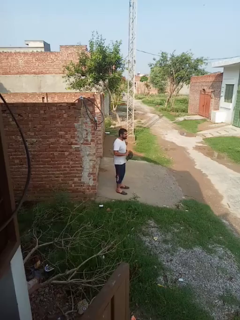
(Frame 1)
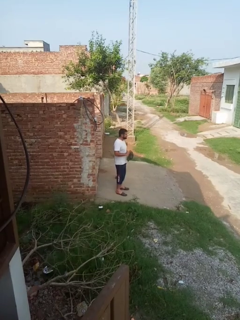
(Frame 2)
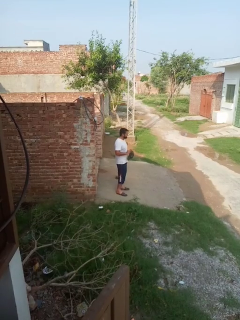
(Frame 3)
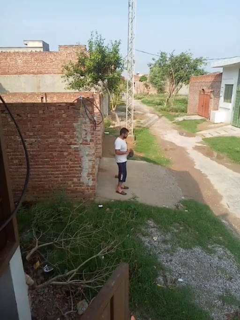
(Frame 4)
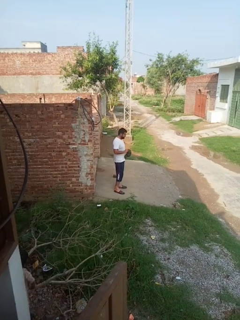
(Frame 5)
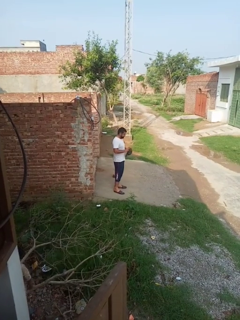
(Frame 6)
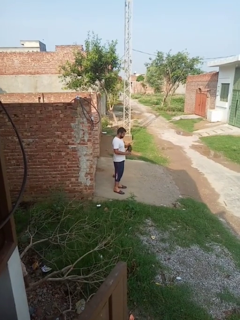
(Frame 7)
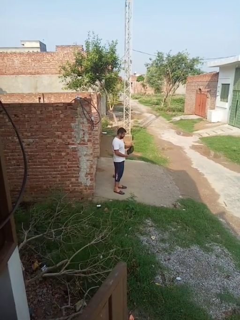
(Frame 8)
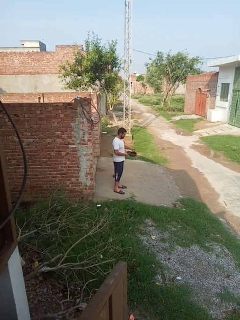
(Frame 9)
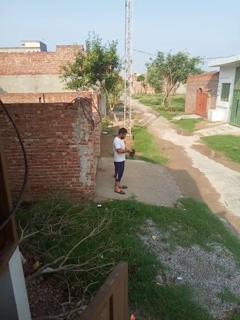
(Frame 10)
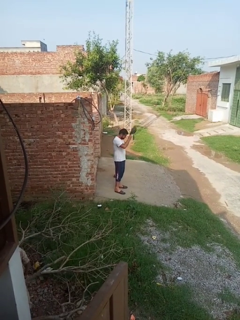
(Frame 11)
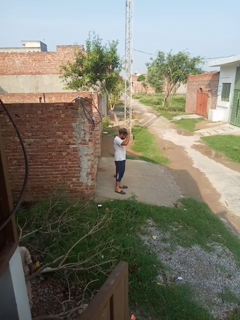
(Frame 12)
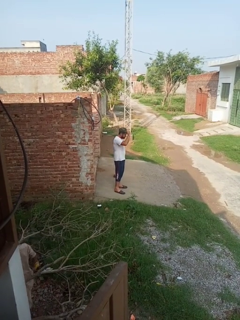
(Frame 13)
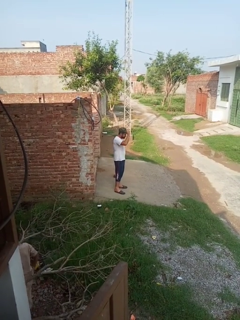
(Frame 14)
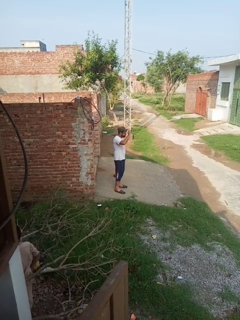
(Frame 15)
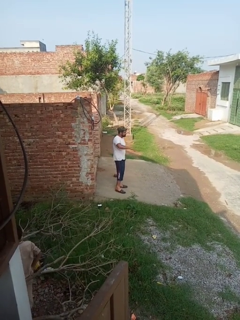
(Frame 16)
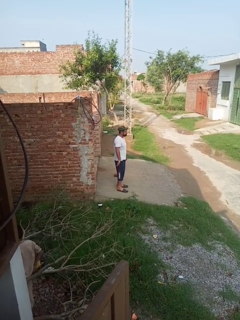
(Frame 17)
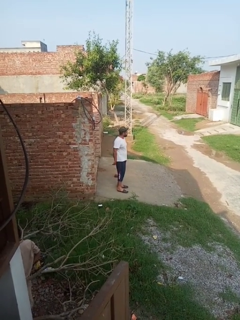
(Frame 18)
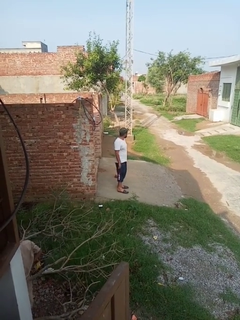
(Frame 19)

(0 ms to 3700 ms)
person puts on hat

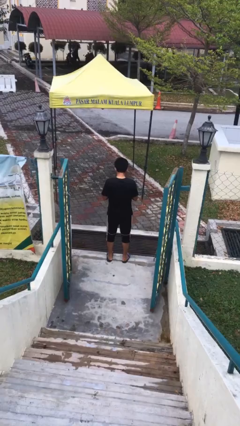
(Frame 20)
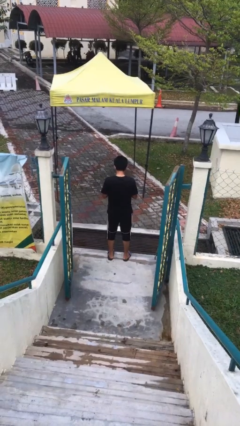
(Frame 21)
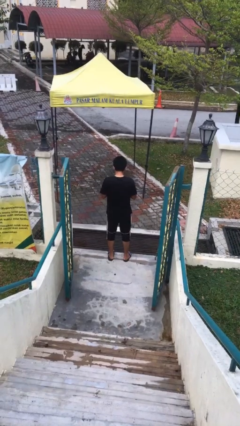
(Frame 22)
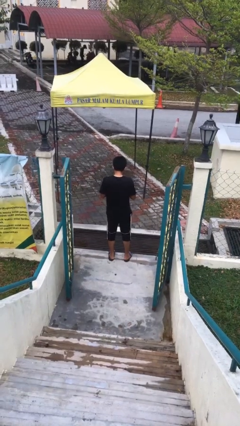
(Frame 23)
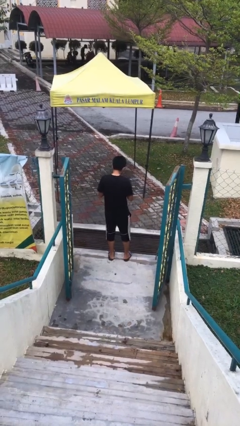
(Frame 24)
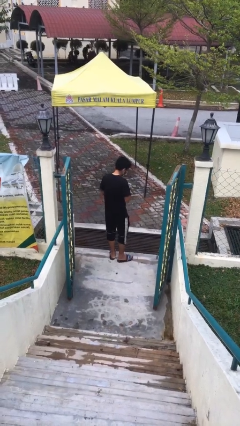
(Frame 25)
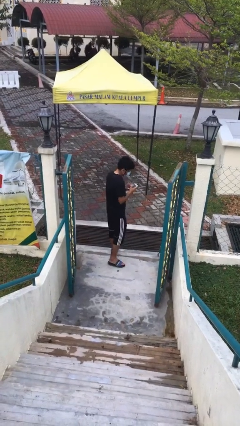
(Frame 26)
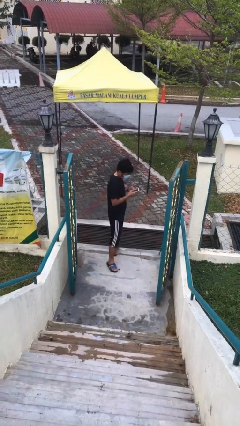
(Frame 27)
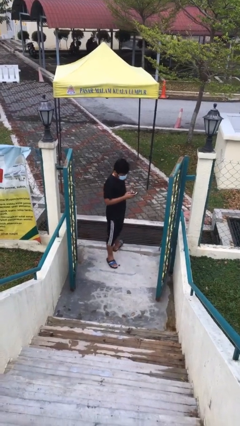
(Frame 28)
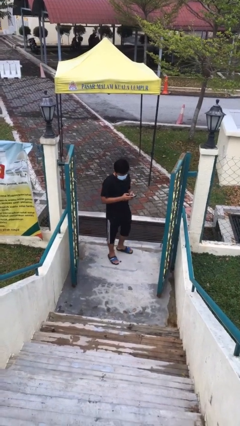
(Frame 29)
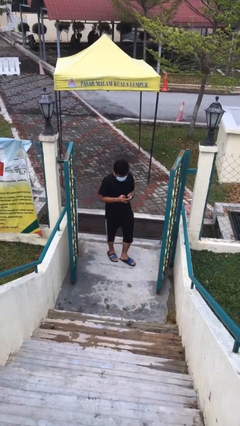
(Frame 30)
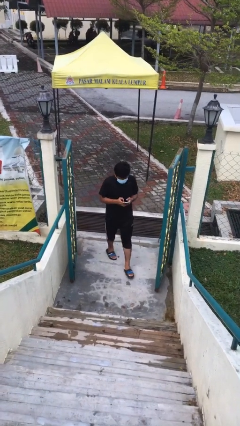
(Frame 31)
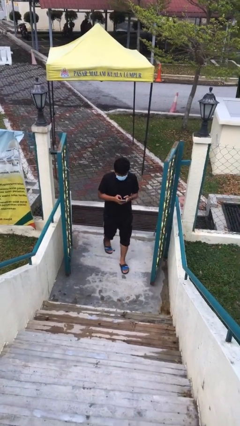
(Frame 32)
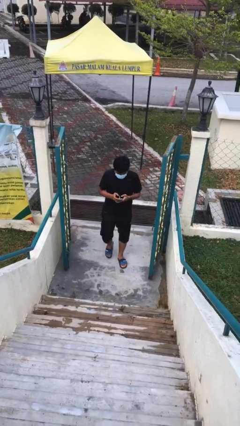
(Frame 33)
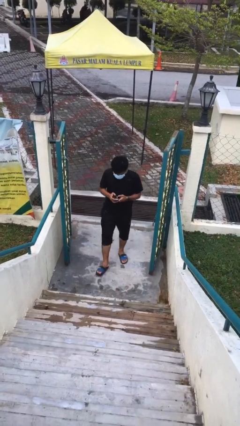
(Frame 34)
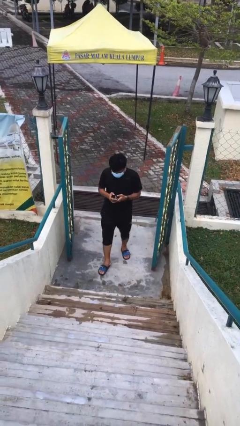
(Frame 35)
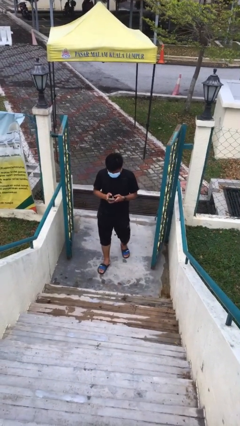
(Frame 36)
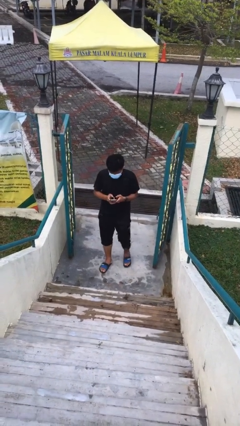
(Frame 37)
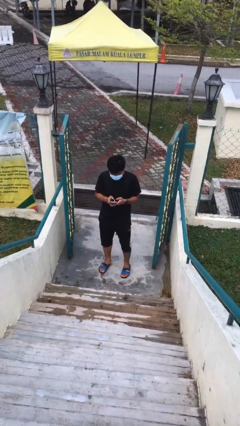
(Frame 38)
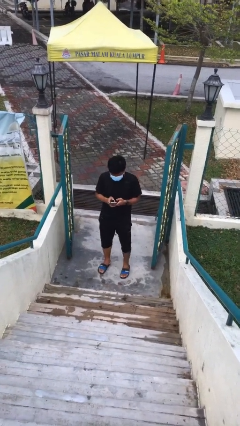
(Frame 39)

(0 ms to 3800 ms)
person enters scene through structure

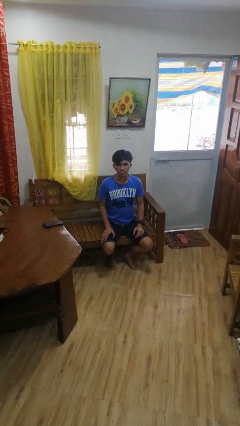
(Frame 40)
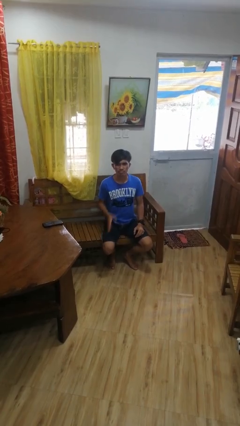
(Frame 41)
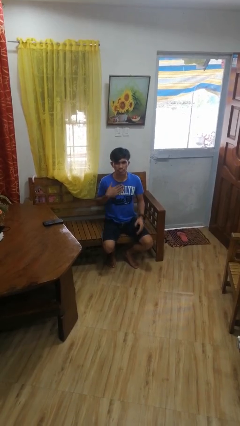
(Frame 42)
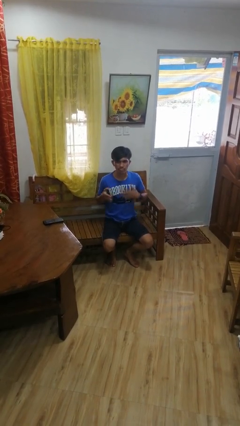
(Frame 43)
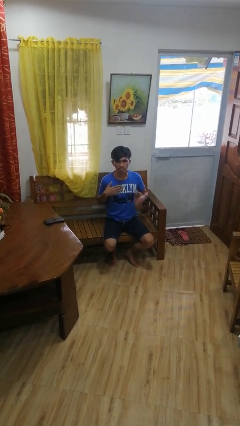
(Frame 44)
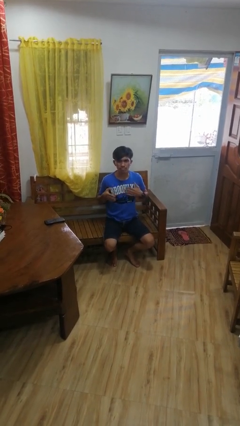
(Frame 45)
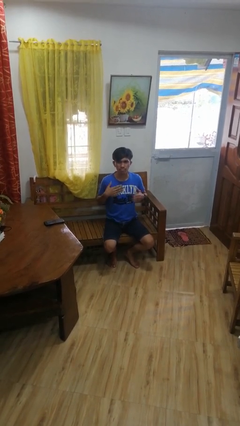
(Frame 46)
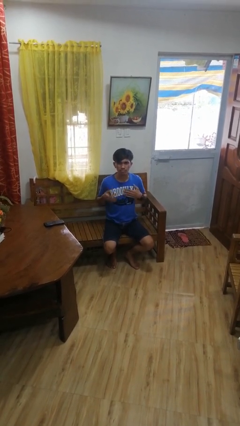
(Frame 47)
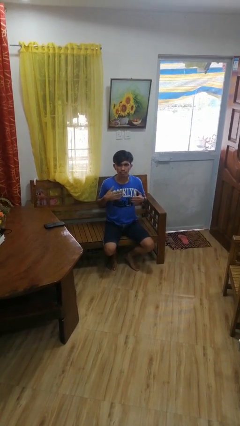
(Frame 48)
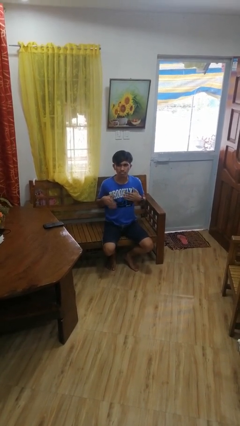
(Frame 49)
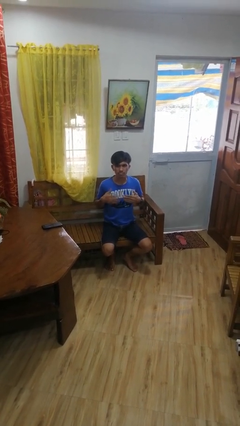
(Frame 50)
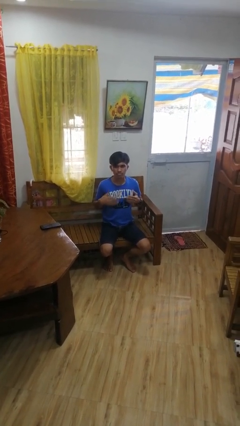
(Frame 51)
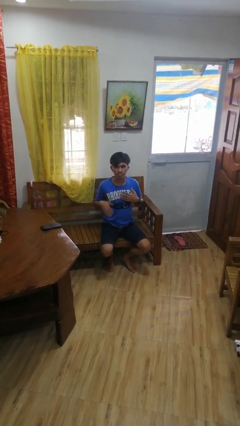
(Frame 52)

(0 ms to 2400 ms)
person drums on chest

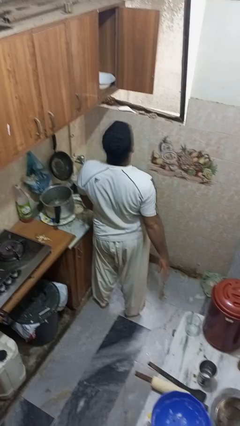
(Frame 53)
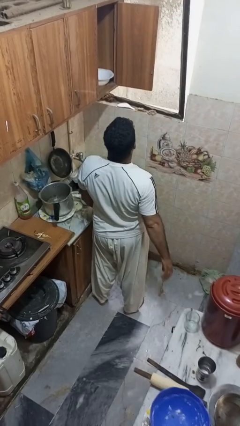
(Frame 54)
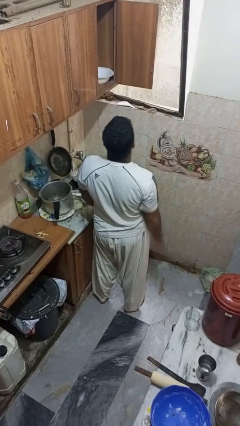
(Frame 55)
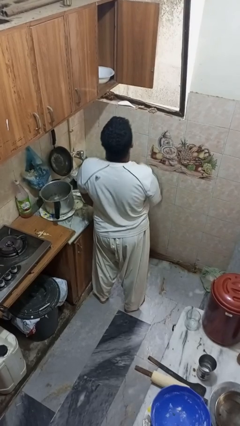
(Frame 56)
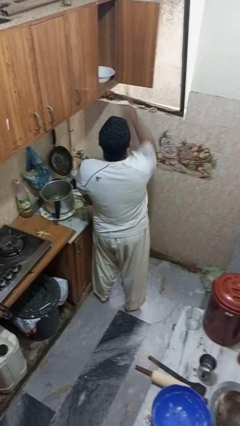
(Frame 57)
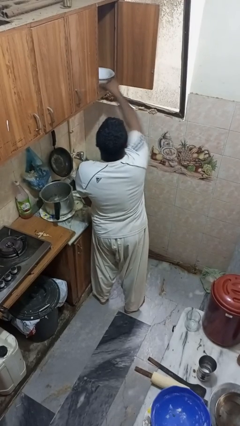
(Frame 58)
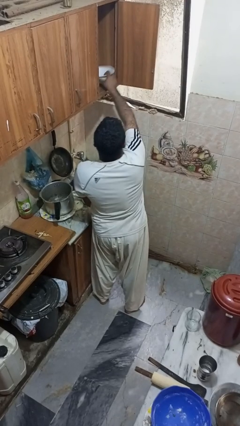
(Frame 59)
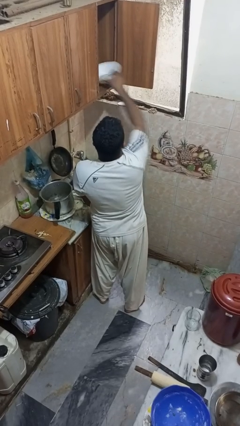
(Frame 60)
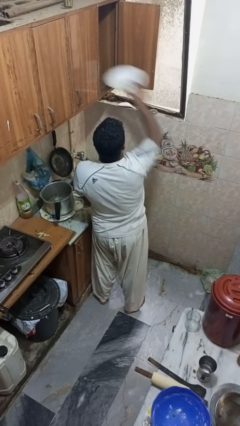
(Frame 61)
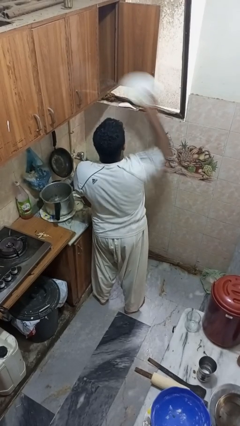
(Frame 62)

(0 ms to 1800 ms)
person takes object from cabinet

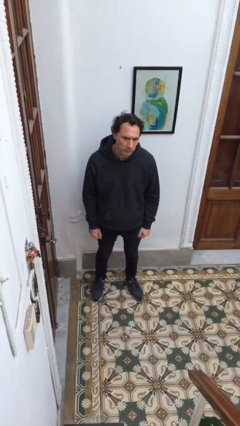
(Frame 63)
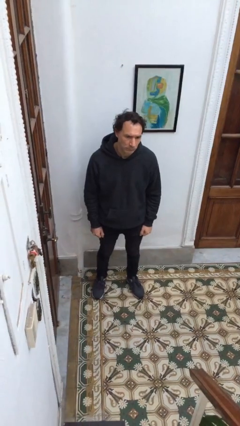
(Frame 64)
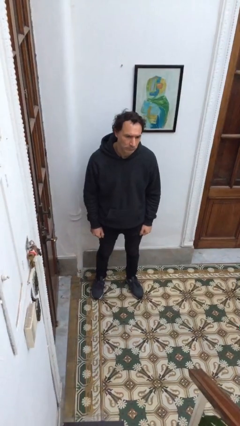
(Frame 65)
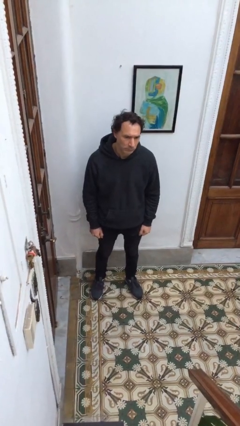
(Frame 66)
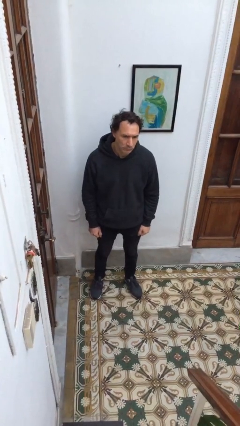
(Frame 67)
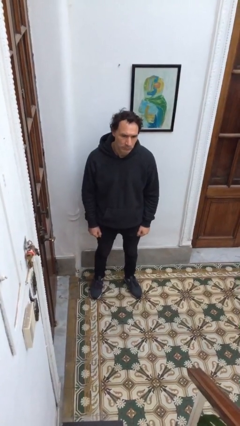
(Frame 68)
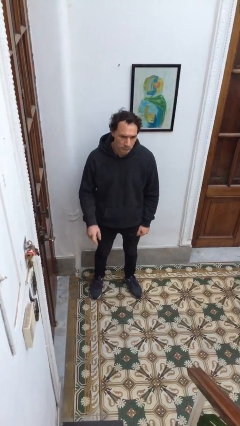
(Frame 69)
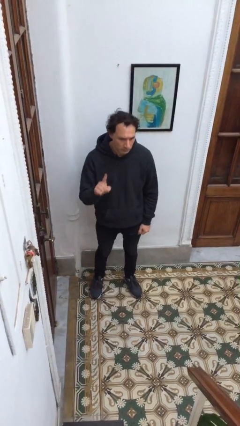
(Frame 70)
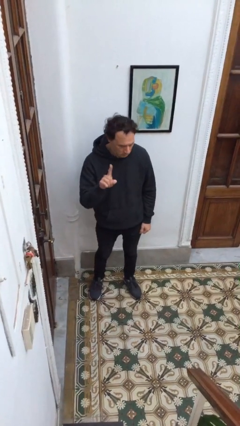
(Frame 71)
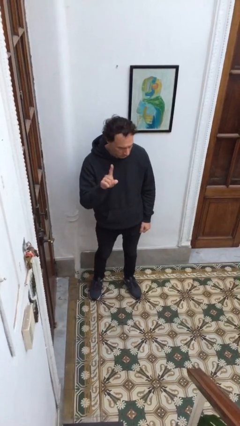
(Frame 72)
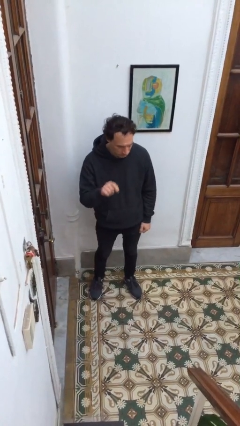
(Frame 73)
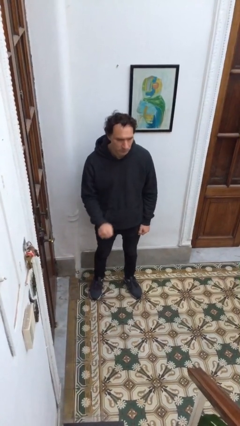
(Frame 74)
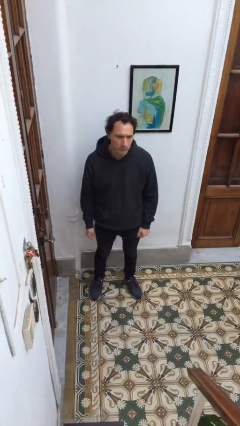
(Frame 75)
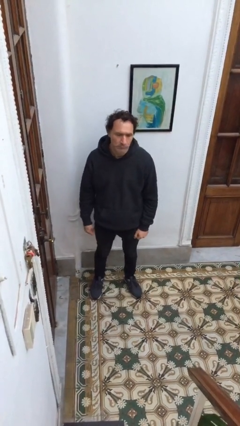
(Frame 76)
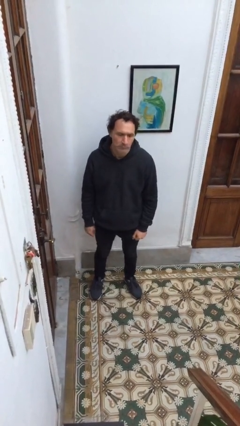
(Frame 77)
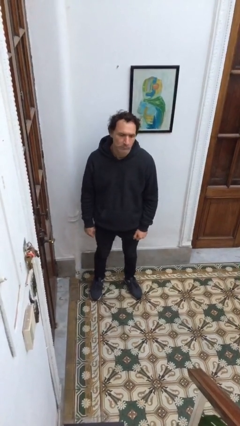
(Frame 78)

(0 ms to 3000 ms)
person gestures number one

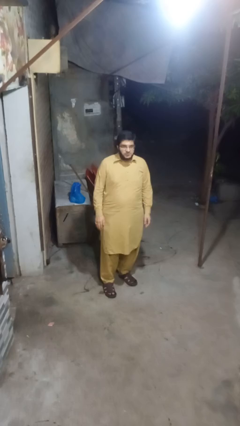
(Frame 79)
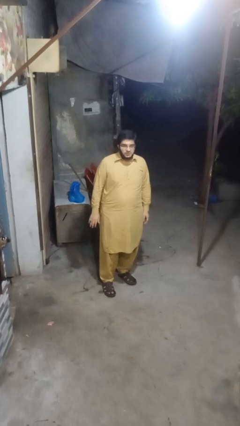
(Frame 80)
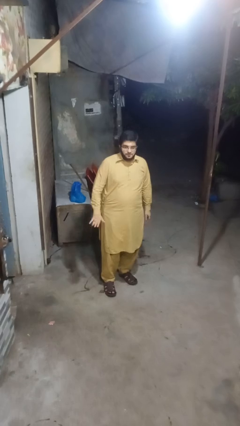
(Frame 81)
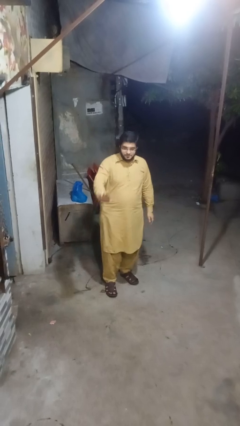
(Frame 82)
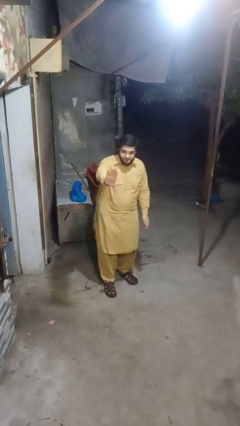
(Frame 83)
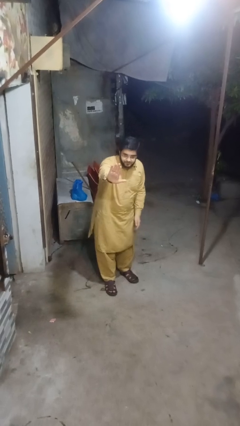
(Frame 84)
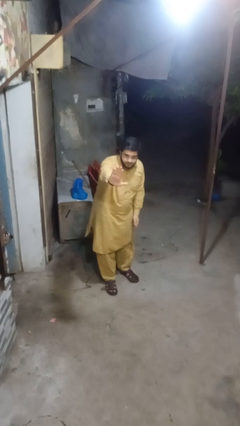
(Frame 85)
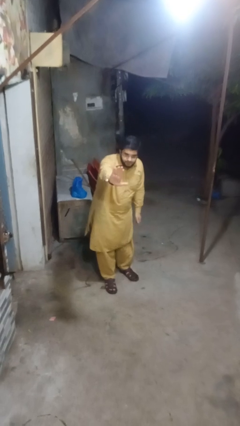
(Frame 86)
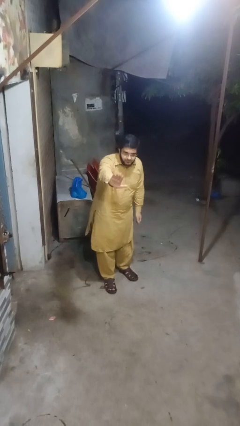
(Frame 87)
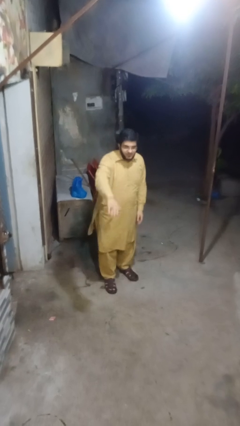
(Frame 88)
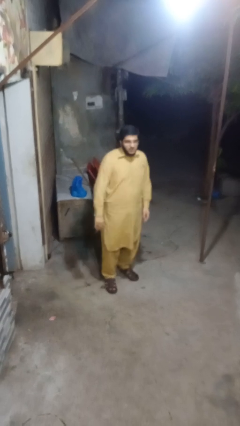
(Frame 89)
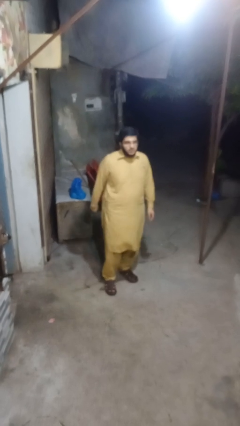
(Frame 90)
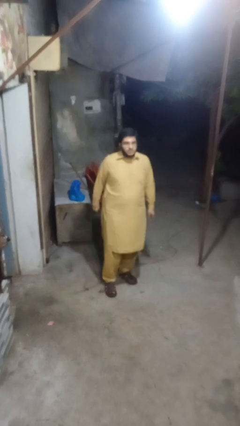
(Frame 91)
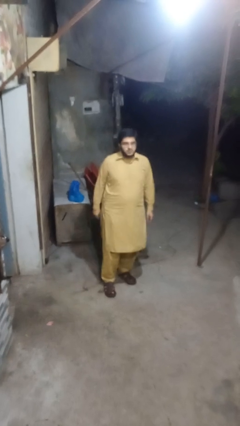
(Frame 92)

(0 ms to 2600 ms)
person gestures stop

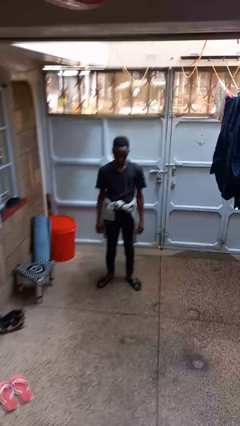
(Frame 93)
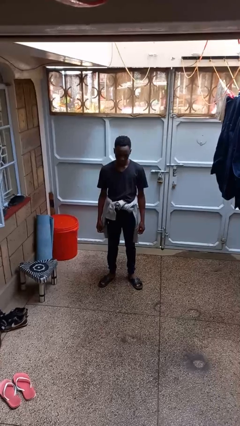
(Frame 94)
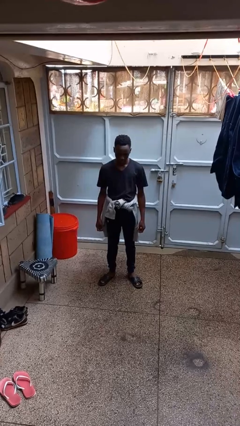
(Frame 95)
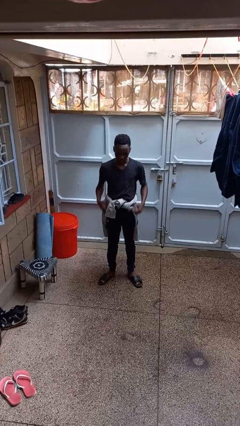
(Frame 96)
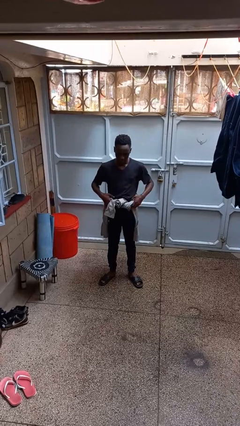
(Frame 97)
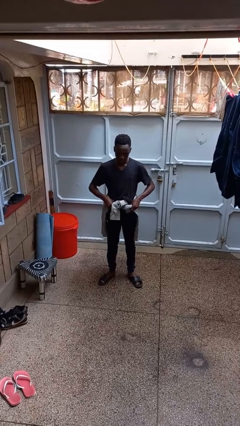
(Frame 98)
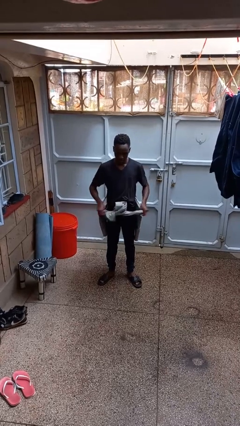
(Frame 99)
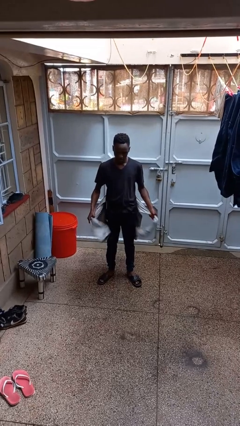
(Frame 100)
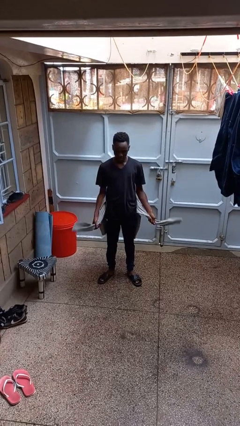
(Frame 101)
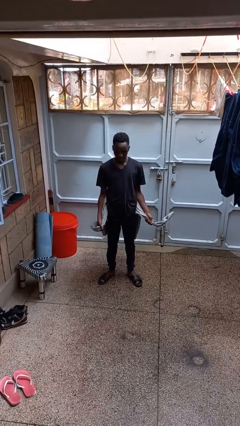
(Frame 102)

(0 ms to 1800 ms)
person unties jacket around waist
